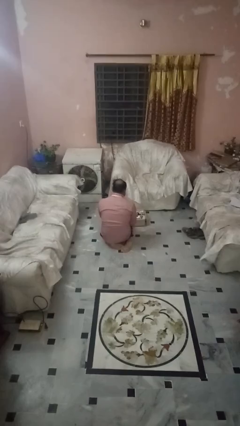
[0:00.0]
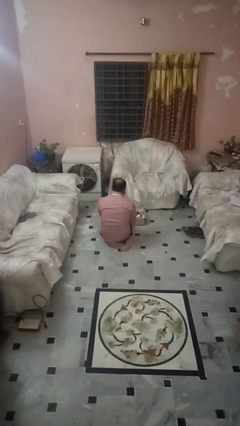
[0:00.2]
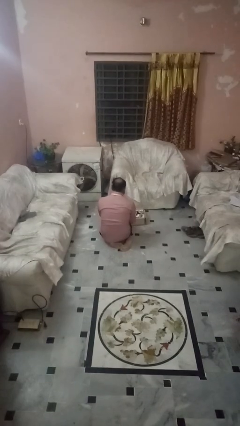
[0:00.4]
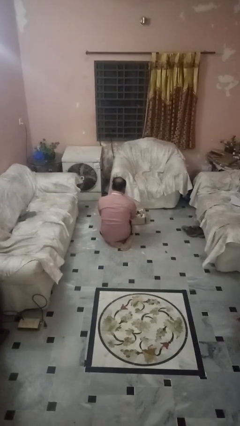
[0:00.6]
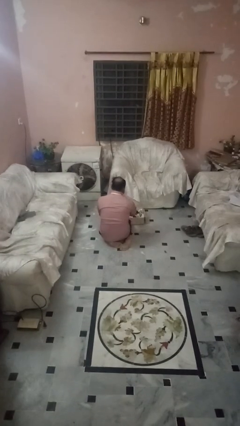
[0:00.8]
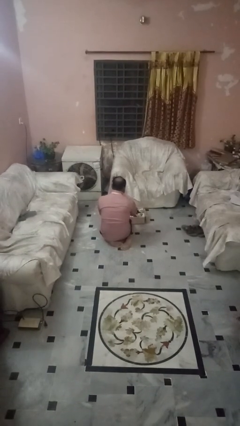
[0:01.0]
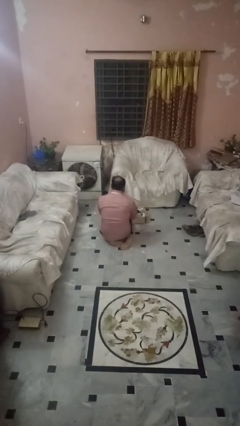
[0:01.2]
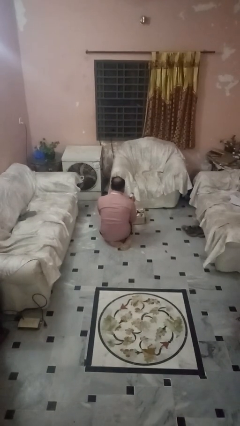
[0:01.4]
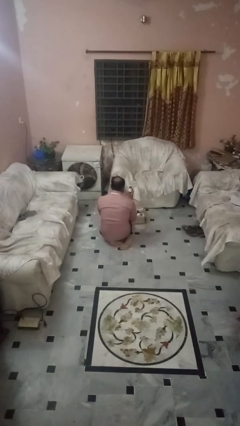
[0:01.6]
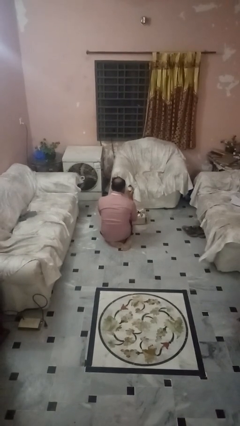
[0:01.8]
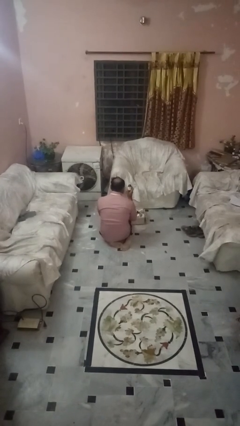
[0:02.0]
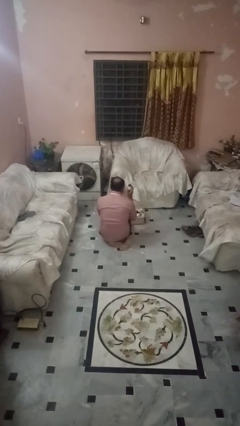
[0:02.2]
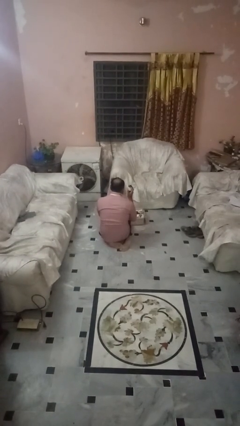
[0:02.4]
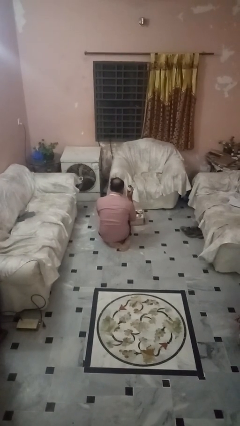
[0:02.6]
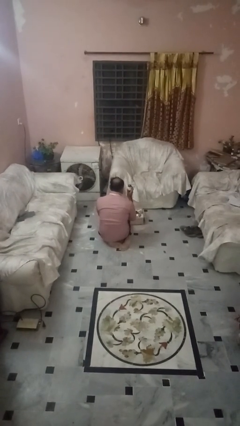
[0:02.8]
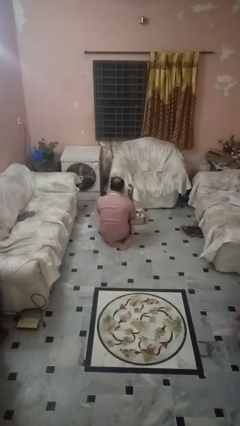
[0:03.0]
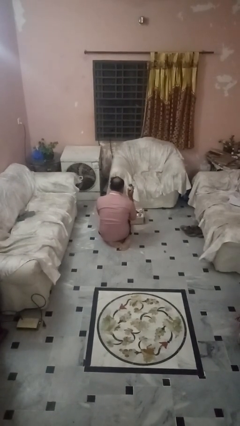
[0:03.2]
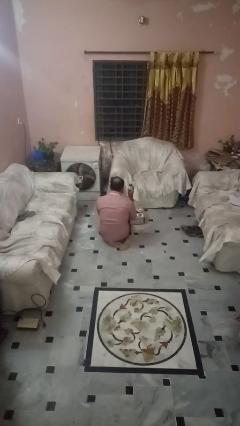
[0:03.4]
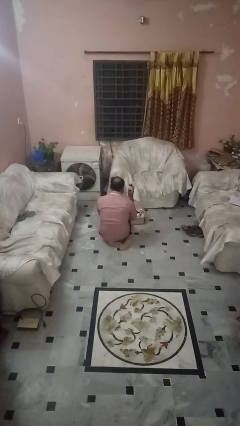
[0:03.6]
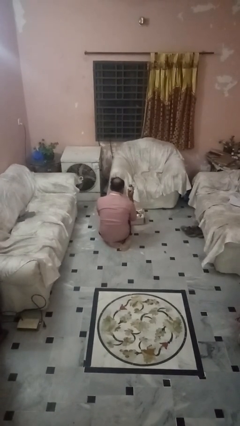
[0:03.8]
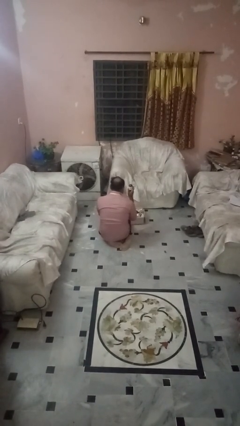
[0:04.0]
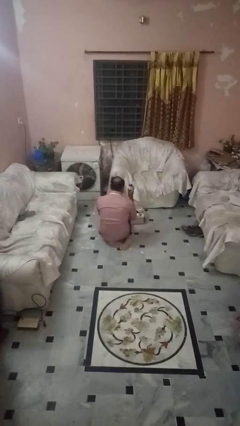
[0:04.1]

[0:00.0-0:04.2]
person takes object from box

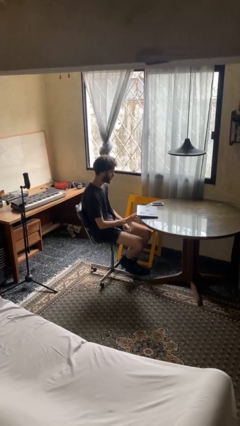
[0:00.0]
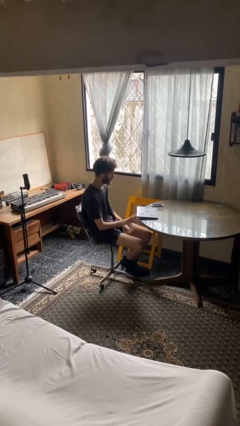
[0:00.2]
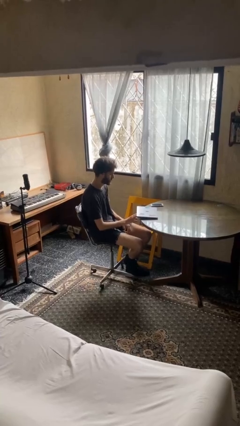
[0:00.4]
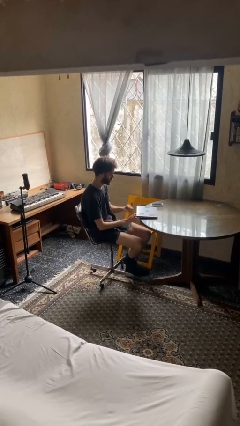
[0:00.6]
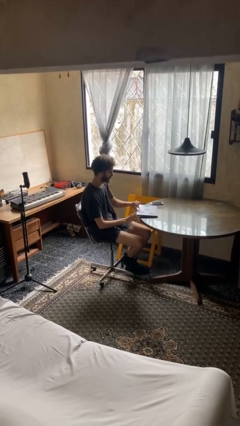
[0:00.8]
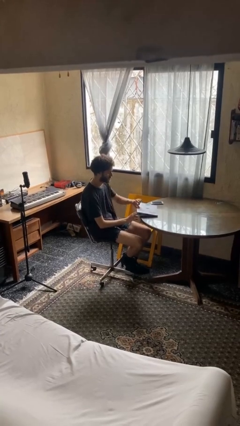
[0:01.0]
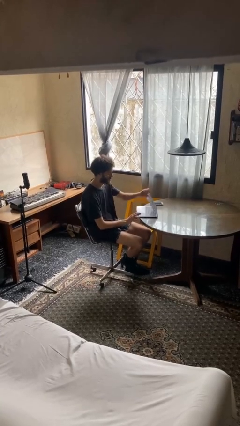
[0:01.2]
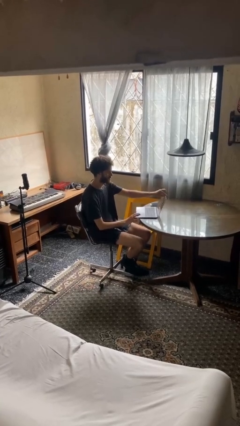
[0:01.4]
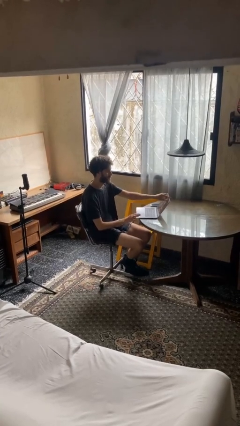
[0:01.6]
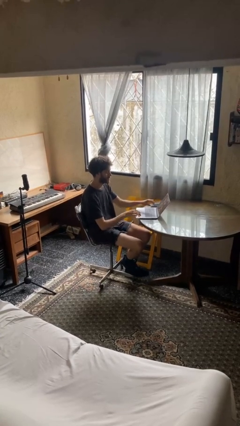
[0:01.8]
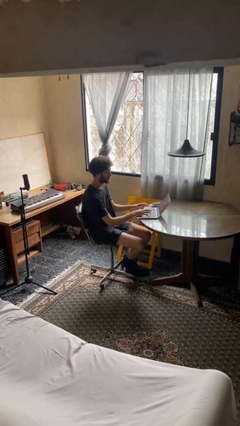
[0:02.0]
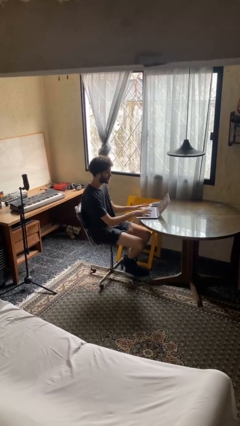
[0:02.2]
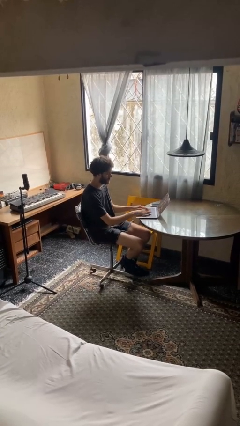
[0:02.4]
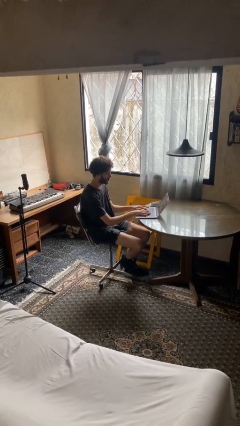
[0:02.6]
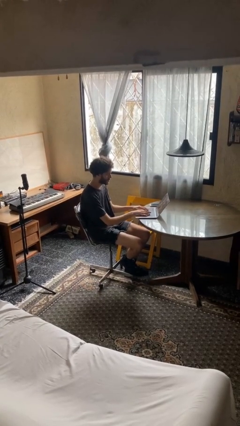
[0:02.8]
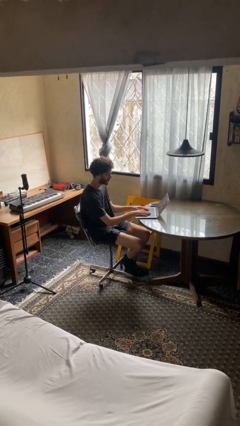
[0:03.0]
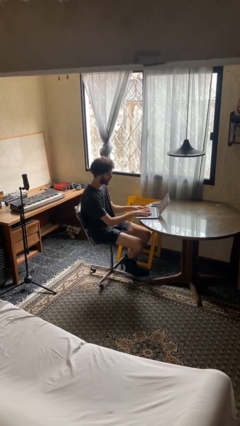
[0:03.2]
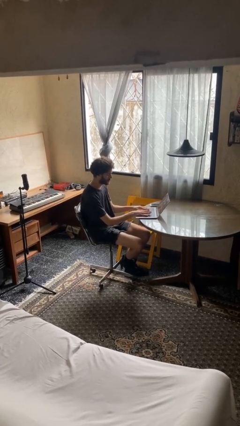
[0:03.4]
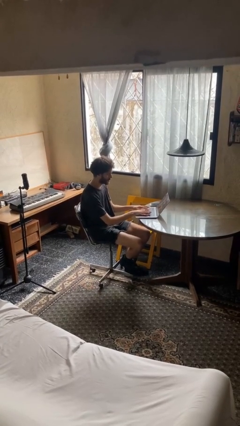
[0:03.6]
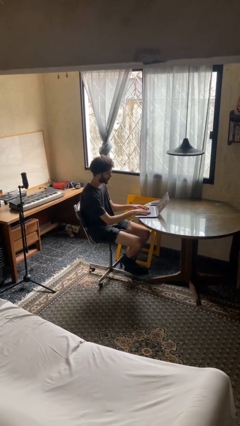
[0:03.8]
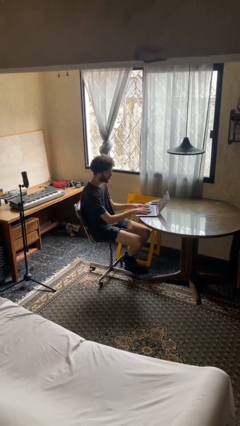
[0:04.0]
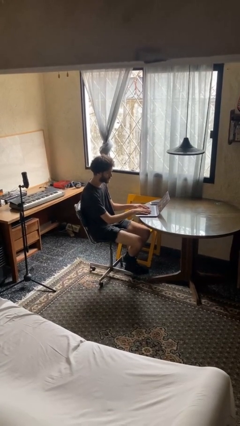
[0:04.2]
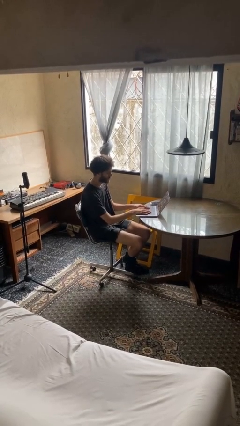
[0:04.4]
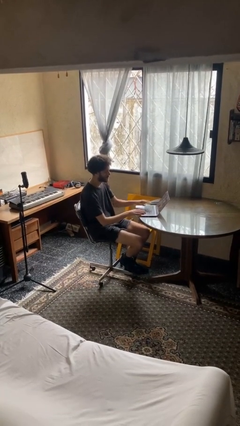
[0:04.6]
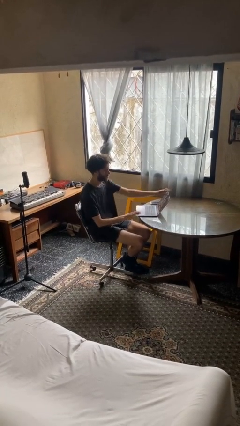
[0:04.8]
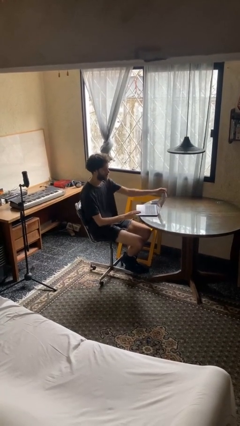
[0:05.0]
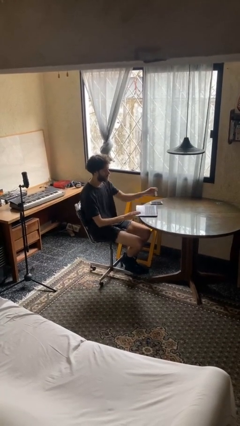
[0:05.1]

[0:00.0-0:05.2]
person interacts with laptop

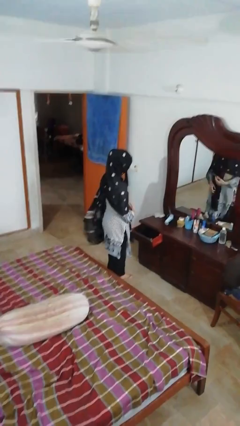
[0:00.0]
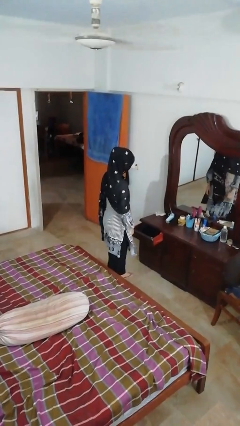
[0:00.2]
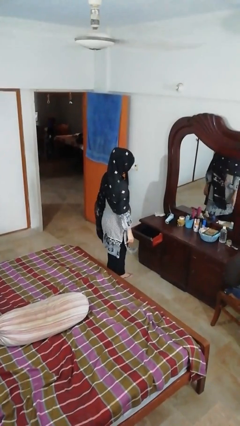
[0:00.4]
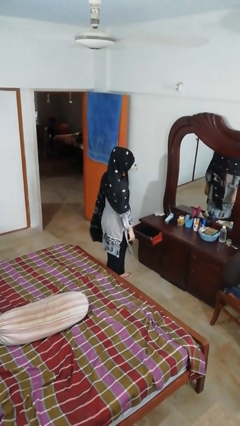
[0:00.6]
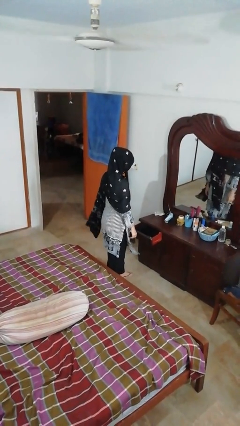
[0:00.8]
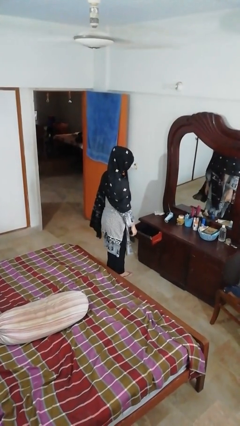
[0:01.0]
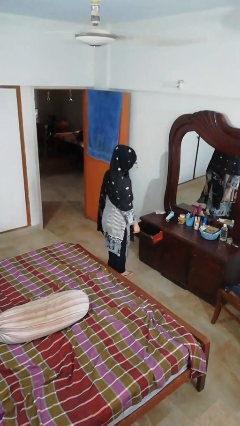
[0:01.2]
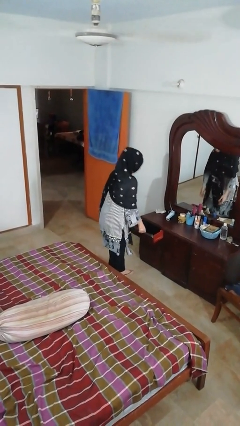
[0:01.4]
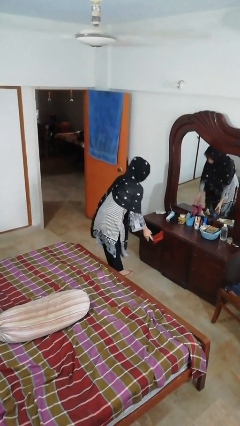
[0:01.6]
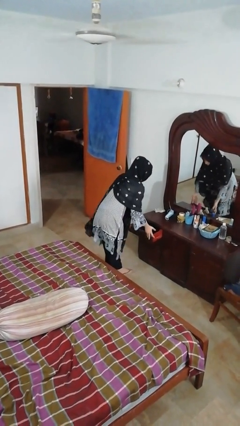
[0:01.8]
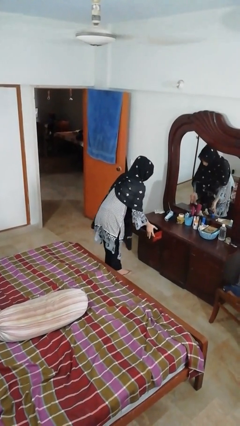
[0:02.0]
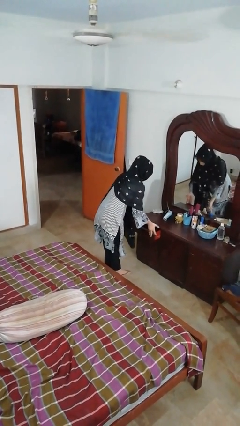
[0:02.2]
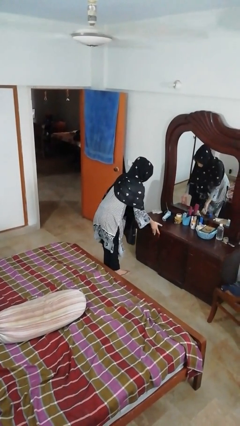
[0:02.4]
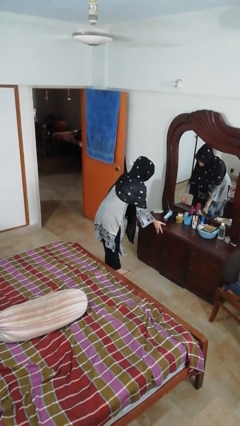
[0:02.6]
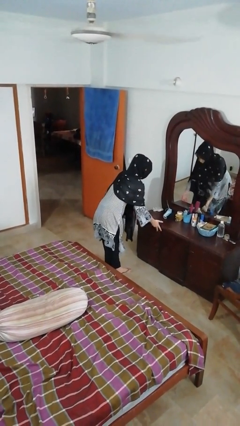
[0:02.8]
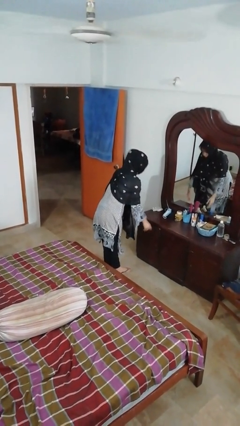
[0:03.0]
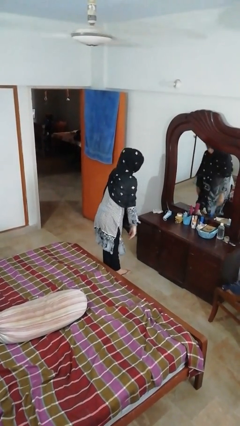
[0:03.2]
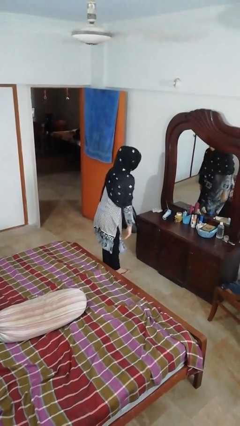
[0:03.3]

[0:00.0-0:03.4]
person closes dresser drawer

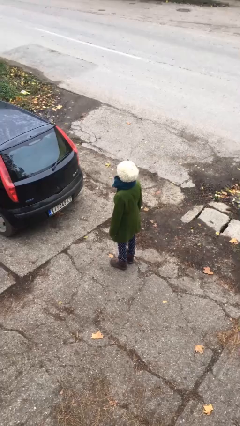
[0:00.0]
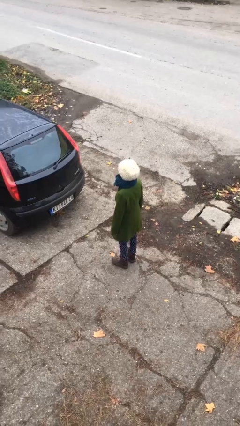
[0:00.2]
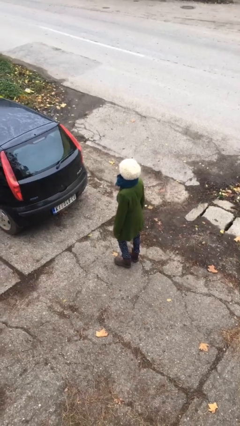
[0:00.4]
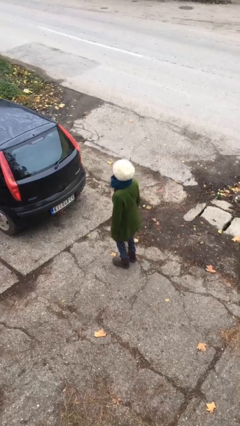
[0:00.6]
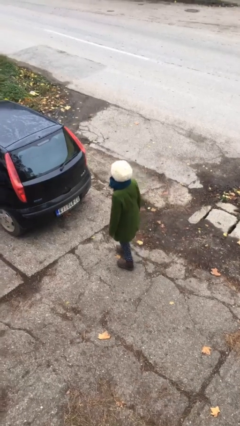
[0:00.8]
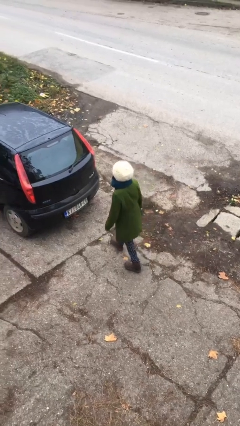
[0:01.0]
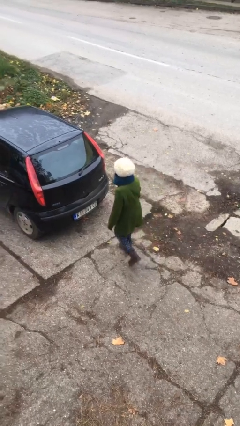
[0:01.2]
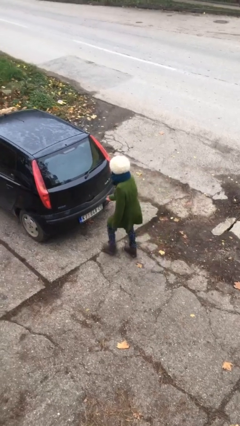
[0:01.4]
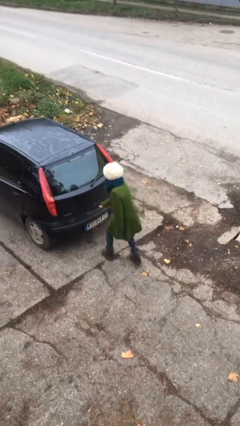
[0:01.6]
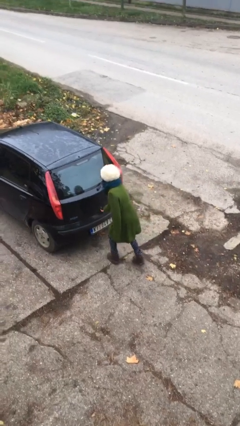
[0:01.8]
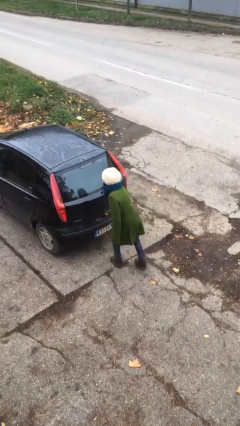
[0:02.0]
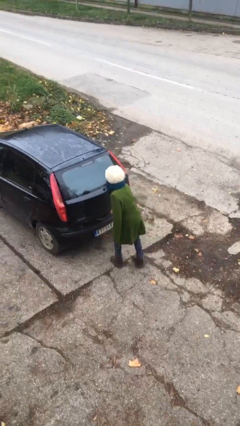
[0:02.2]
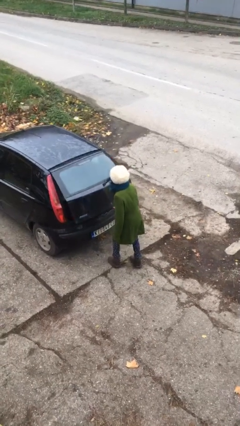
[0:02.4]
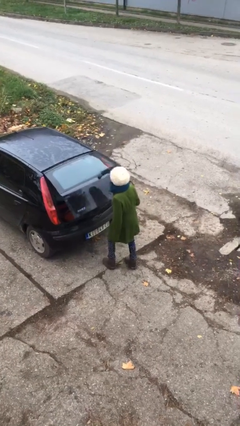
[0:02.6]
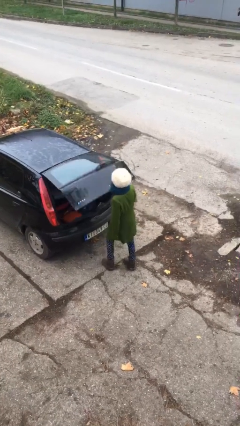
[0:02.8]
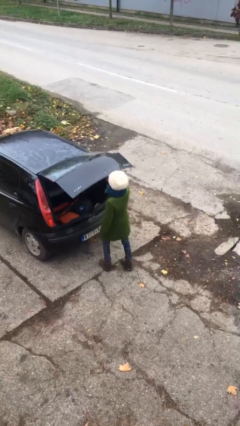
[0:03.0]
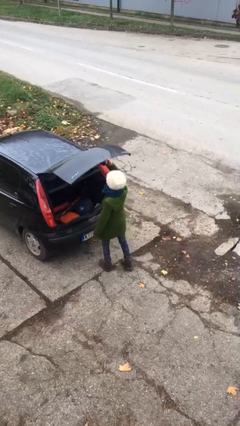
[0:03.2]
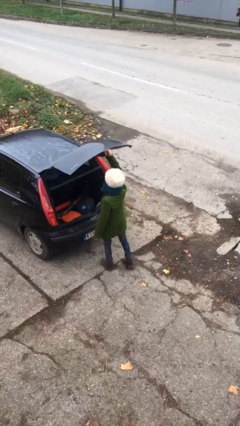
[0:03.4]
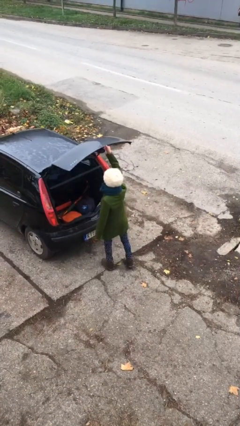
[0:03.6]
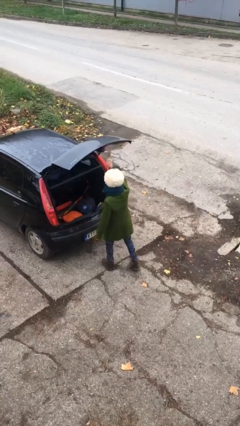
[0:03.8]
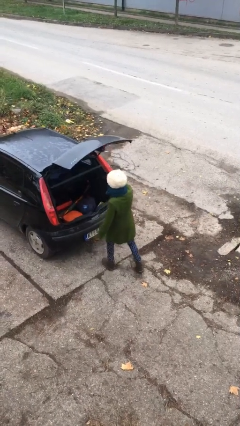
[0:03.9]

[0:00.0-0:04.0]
person opens car trunk

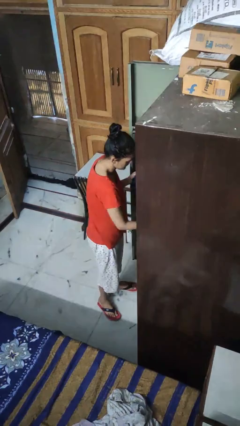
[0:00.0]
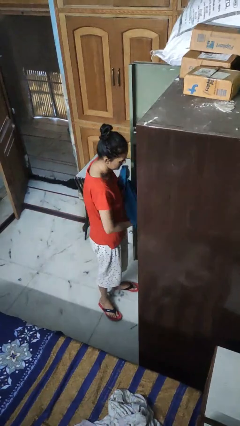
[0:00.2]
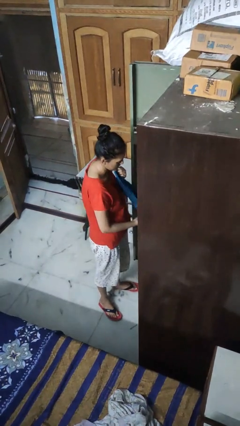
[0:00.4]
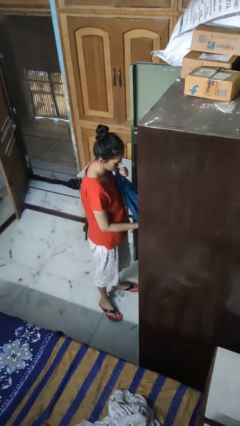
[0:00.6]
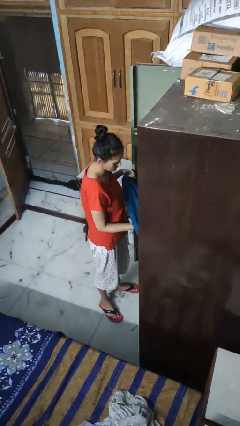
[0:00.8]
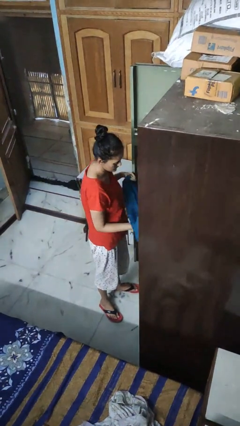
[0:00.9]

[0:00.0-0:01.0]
person takes clothes from dresser
